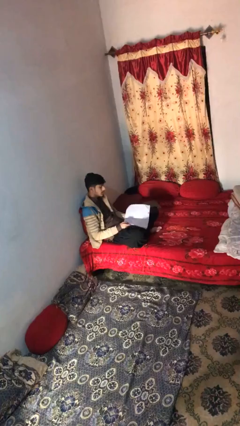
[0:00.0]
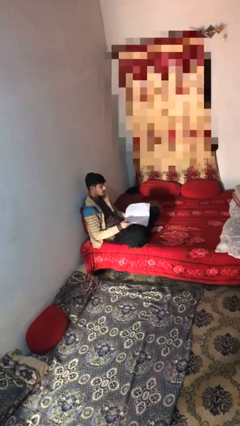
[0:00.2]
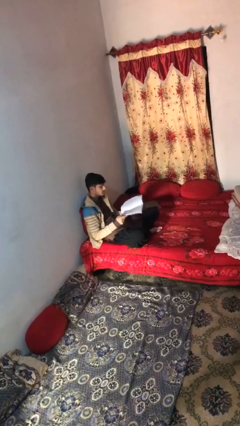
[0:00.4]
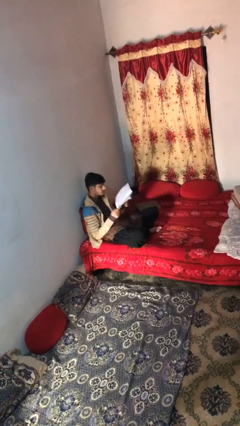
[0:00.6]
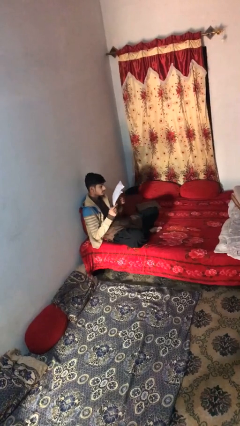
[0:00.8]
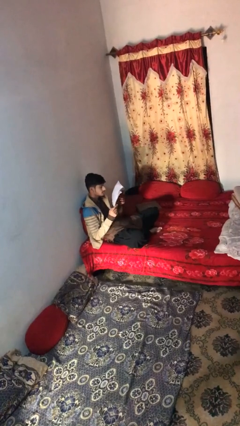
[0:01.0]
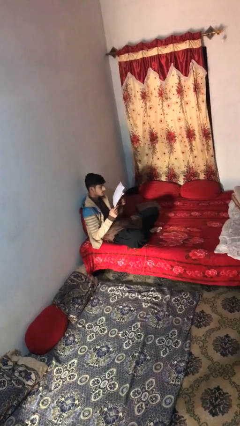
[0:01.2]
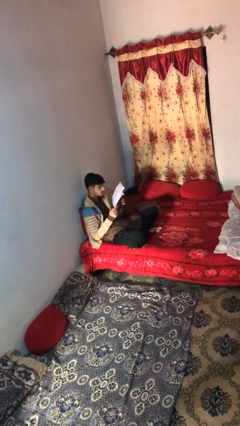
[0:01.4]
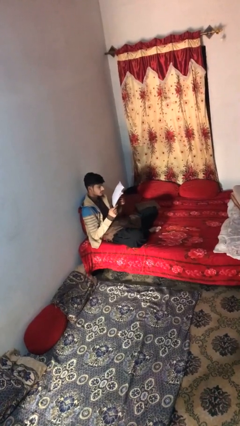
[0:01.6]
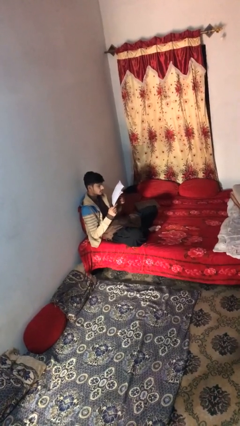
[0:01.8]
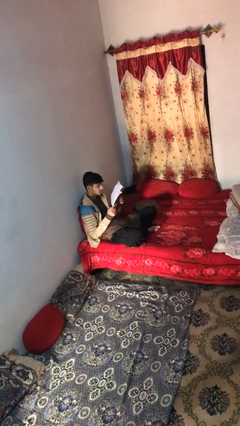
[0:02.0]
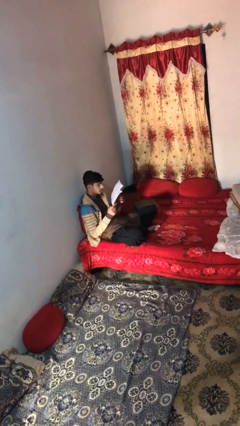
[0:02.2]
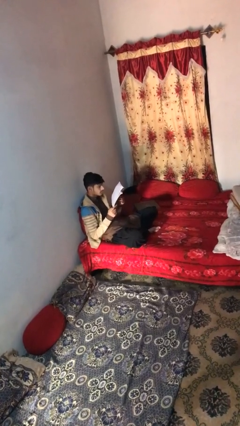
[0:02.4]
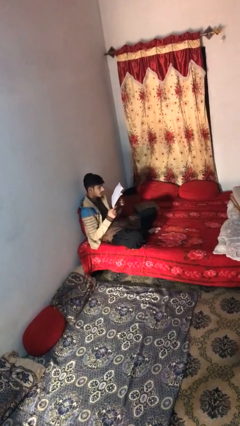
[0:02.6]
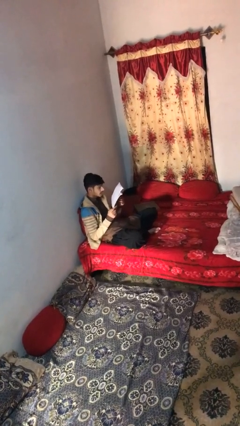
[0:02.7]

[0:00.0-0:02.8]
person reads document

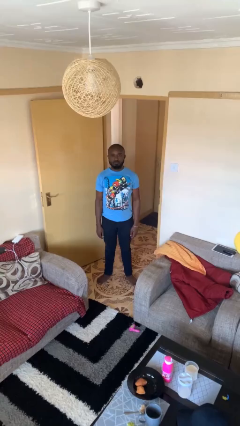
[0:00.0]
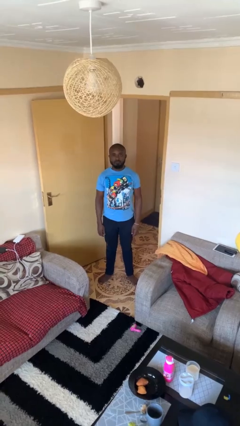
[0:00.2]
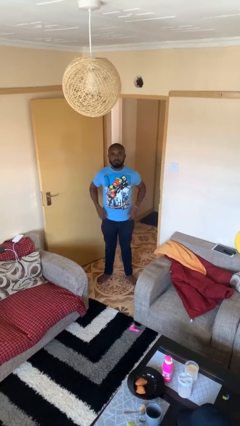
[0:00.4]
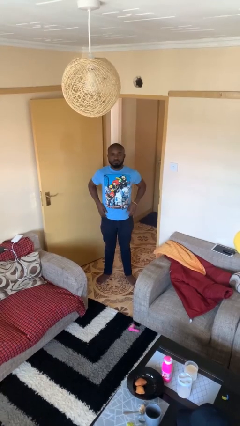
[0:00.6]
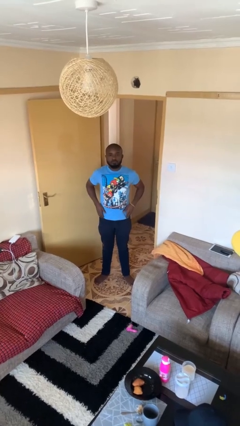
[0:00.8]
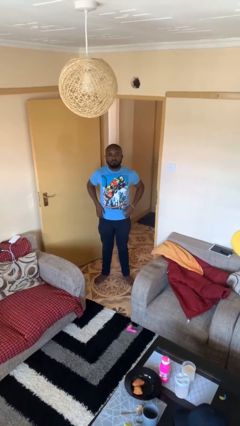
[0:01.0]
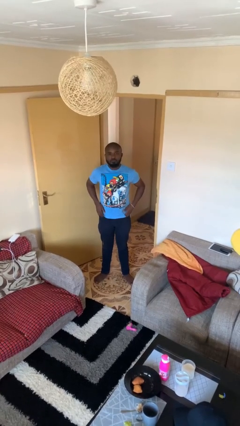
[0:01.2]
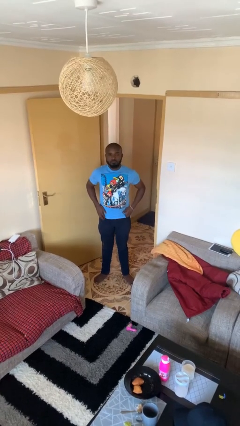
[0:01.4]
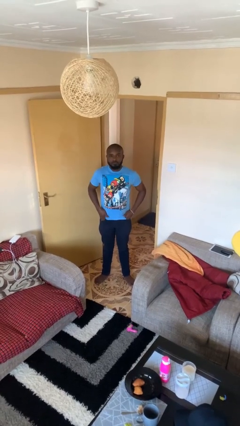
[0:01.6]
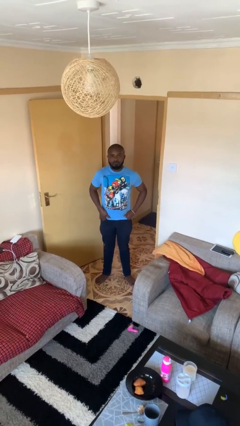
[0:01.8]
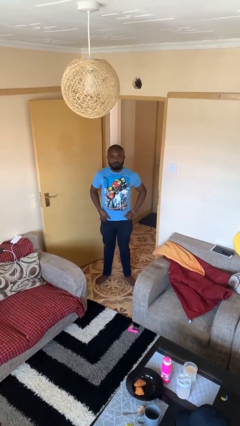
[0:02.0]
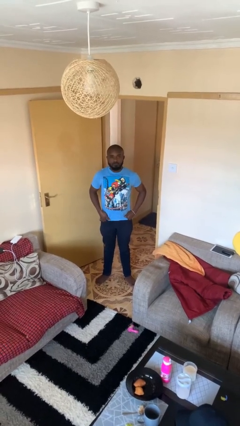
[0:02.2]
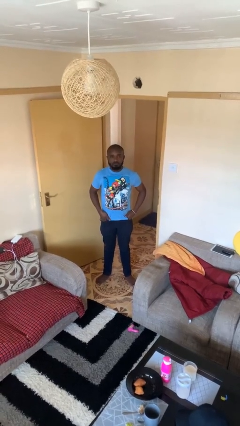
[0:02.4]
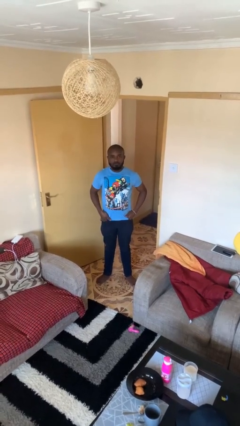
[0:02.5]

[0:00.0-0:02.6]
person puts hands in back pockets

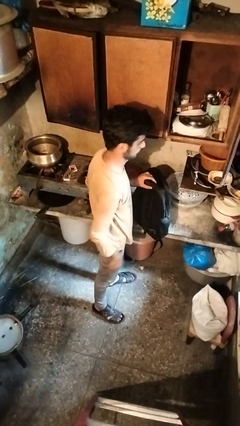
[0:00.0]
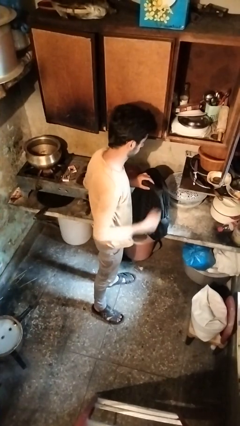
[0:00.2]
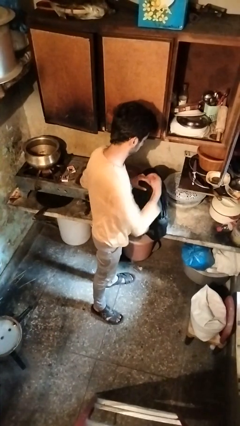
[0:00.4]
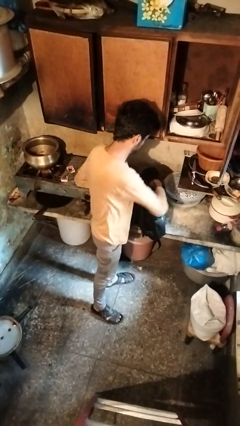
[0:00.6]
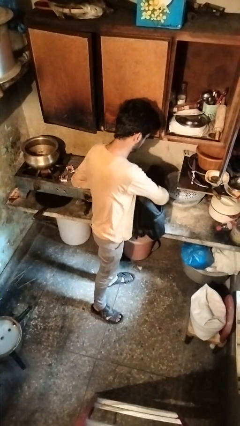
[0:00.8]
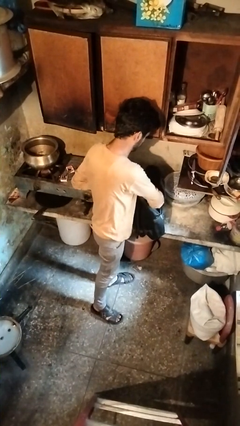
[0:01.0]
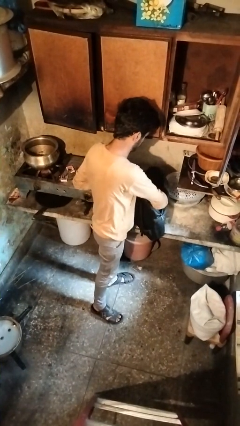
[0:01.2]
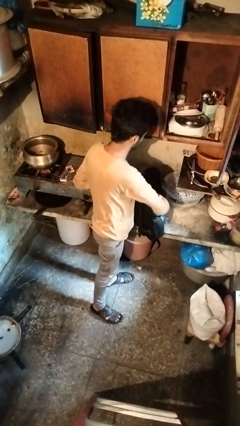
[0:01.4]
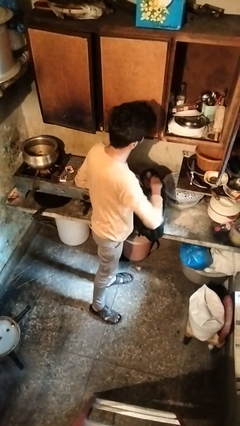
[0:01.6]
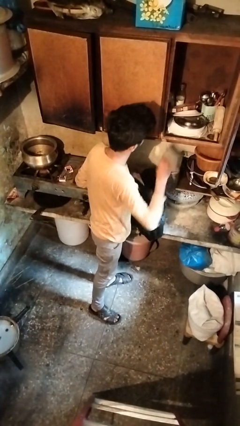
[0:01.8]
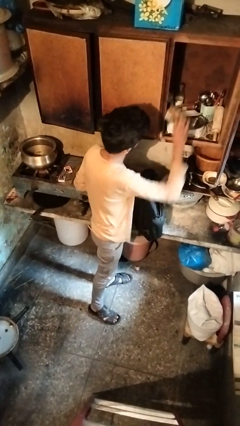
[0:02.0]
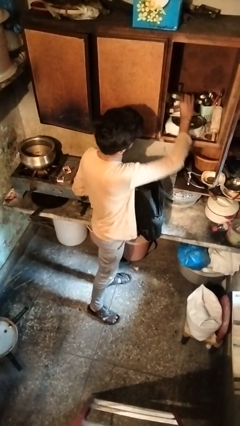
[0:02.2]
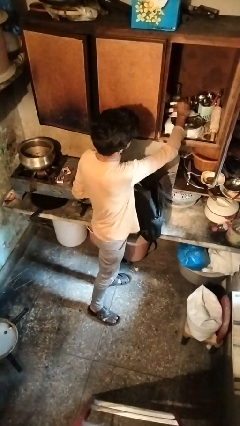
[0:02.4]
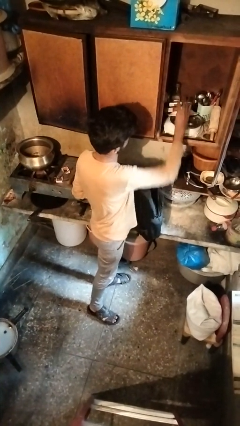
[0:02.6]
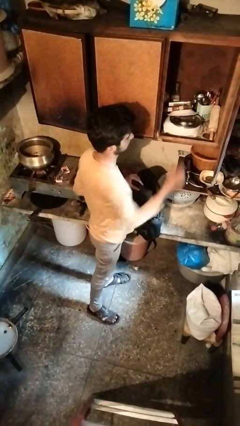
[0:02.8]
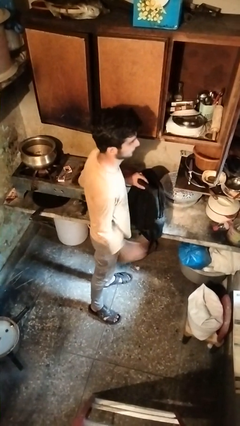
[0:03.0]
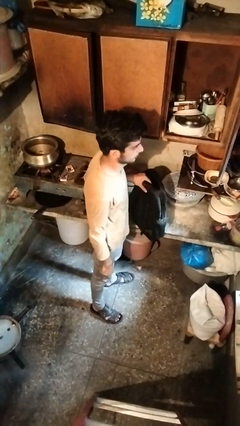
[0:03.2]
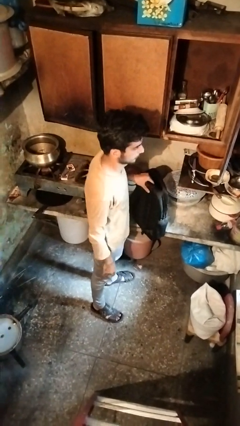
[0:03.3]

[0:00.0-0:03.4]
person loads groceries into cabinet

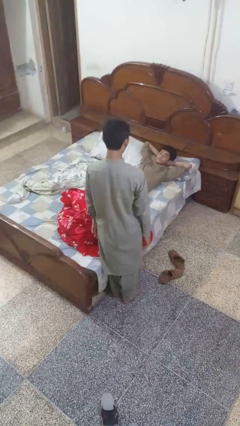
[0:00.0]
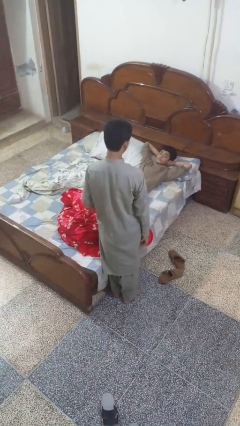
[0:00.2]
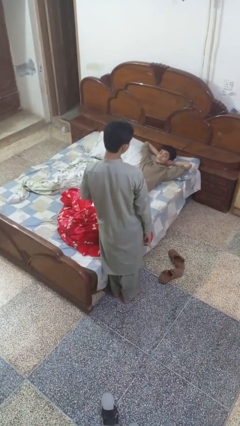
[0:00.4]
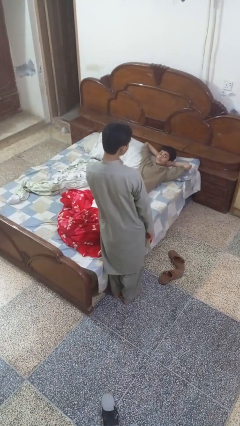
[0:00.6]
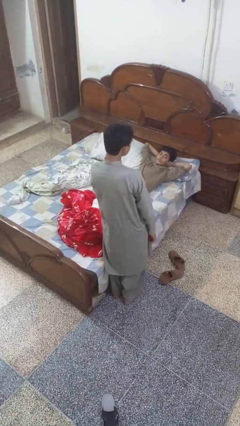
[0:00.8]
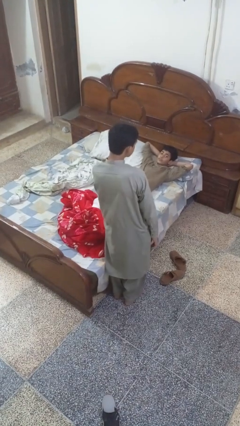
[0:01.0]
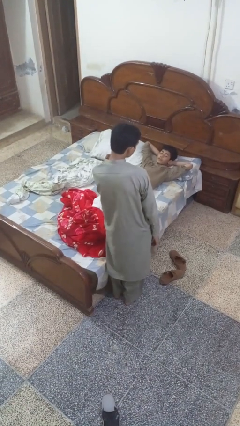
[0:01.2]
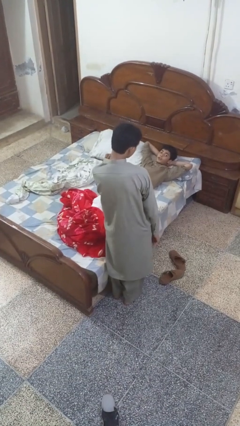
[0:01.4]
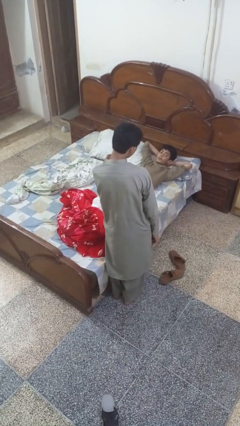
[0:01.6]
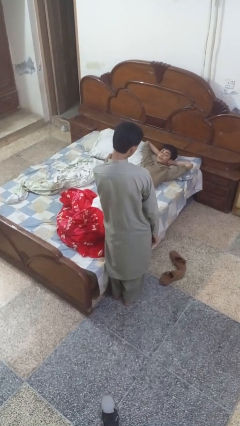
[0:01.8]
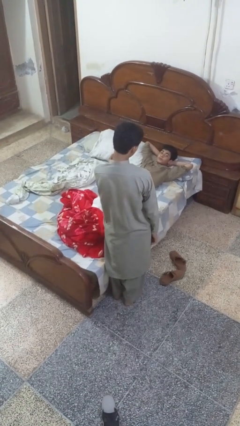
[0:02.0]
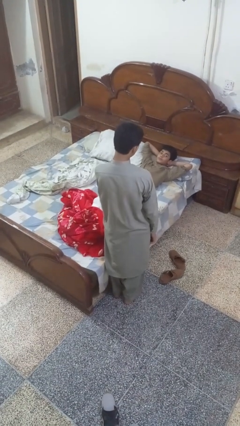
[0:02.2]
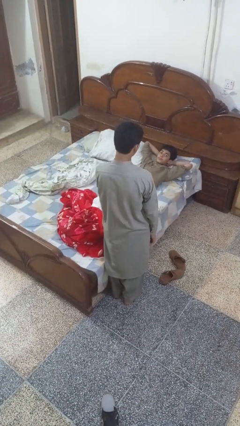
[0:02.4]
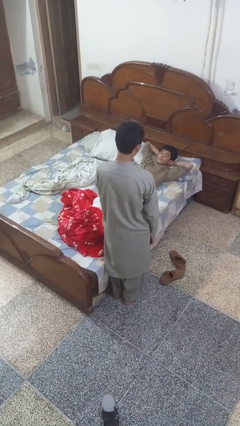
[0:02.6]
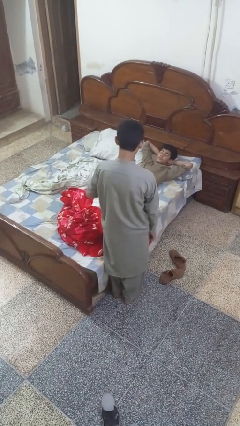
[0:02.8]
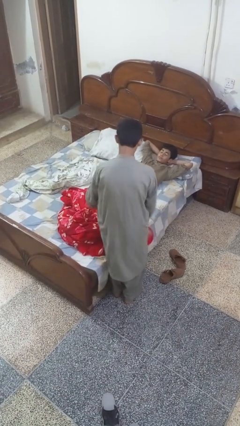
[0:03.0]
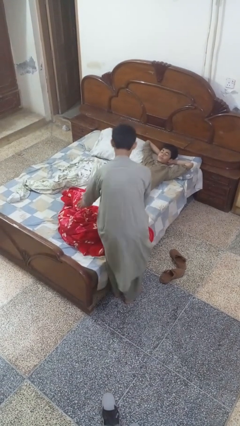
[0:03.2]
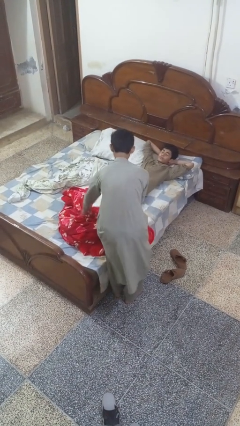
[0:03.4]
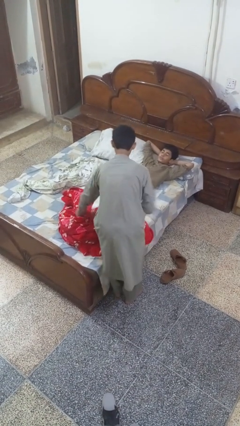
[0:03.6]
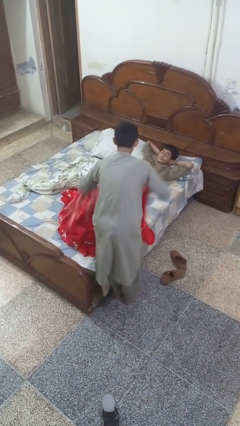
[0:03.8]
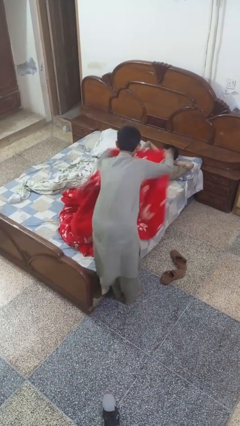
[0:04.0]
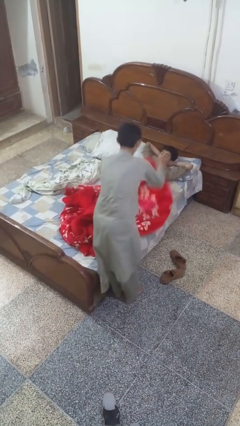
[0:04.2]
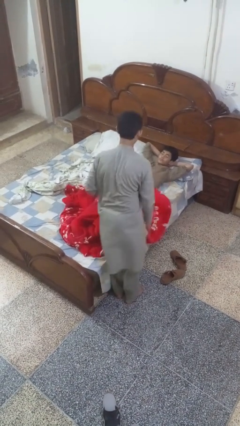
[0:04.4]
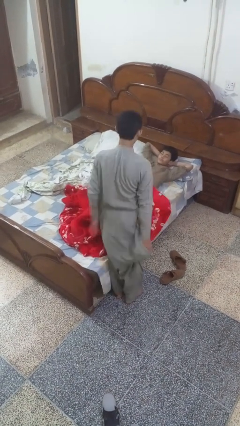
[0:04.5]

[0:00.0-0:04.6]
person covers friend with blanket

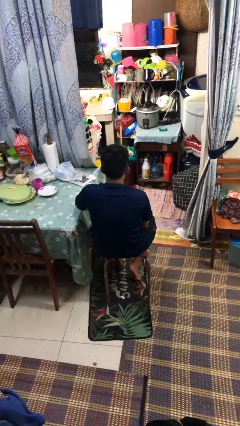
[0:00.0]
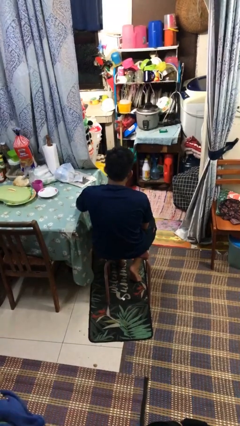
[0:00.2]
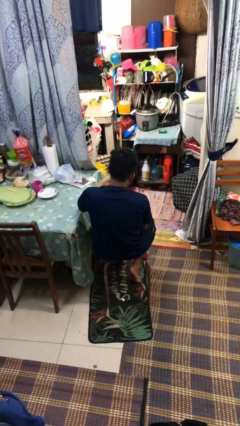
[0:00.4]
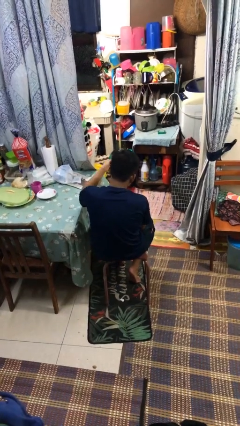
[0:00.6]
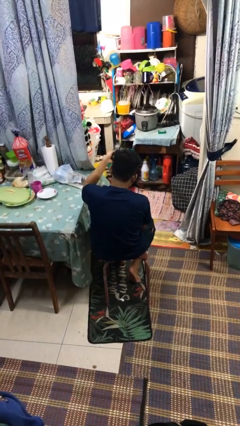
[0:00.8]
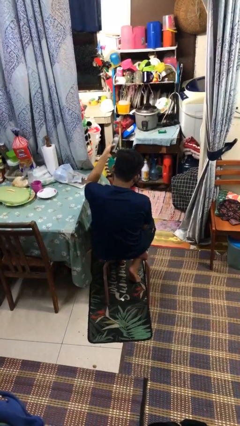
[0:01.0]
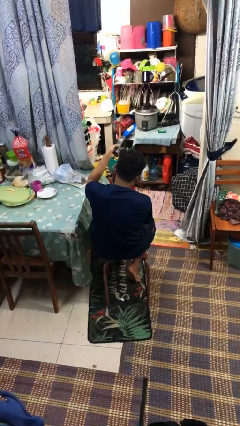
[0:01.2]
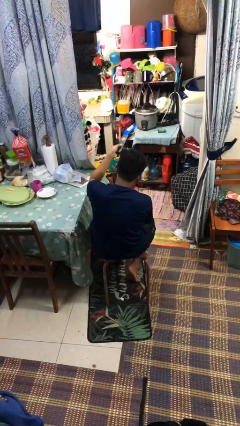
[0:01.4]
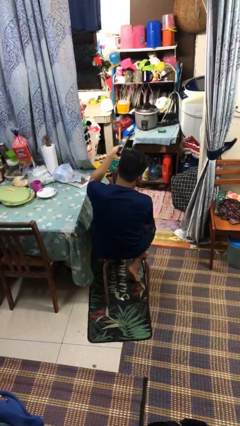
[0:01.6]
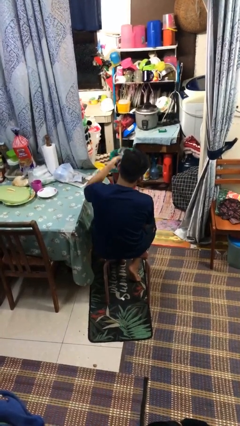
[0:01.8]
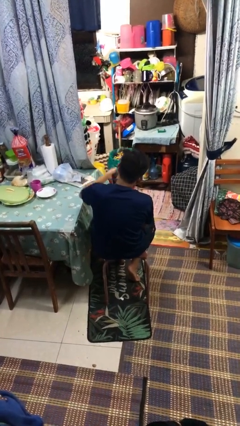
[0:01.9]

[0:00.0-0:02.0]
person uses television remote

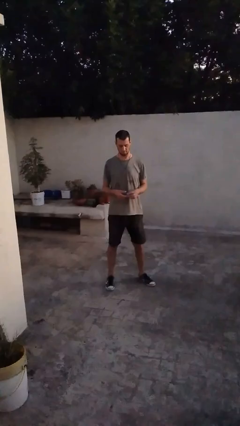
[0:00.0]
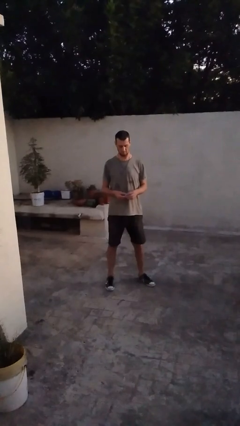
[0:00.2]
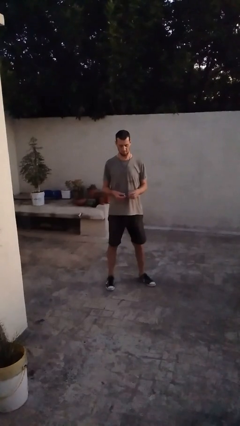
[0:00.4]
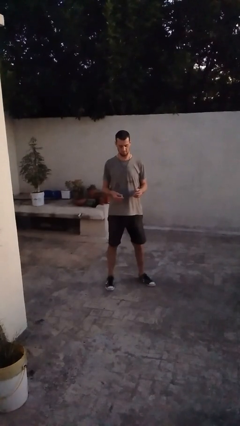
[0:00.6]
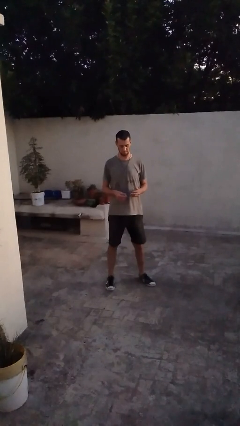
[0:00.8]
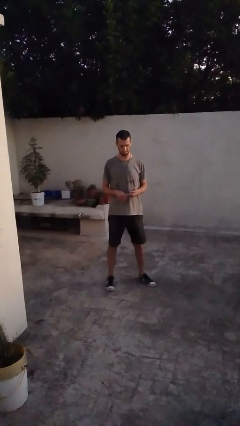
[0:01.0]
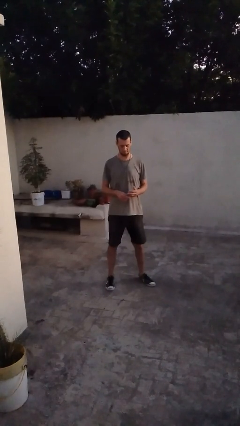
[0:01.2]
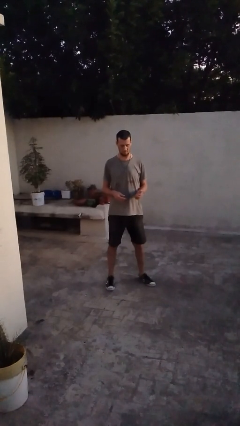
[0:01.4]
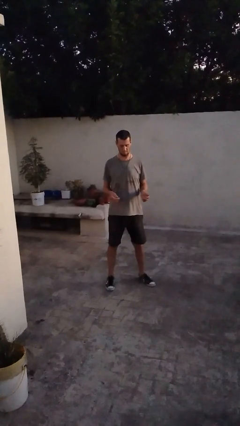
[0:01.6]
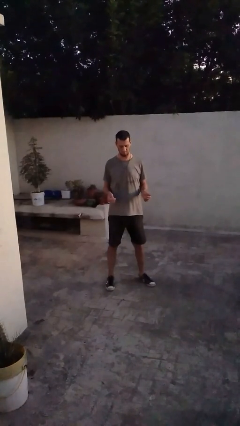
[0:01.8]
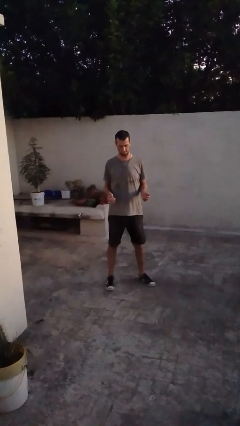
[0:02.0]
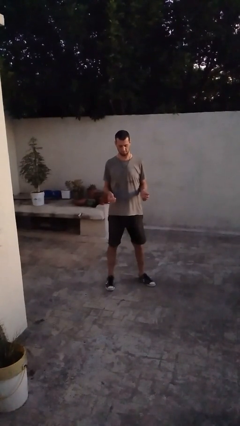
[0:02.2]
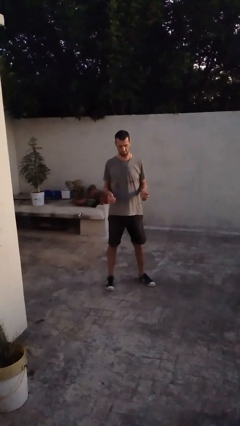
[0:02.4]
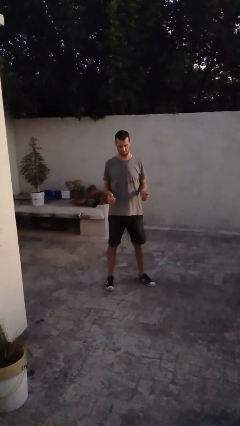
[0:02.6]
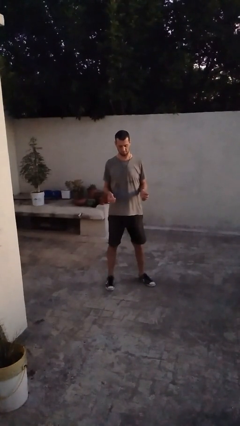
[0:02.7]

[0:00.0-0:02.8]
person puts on ring
